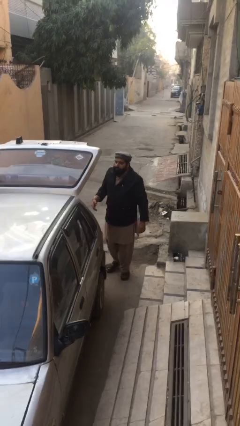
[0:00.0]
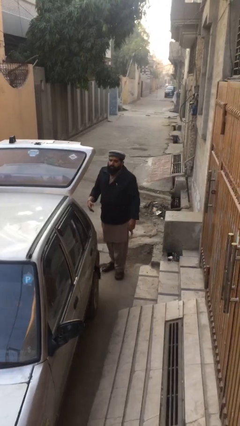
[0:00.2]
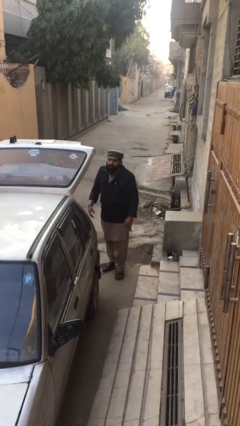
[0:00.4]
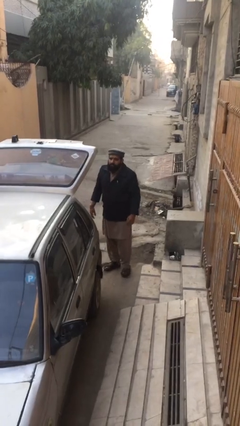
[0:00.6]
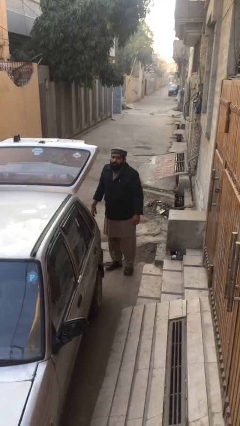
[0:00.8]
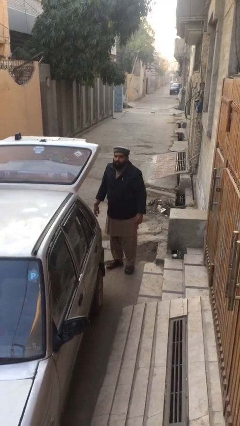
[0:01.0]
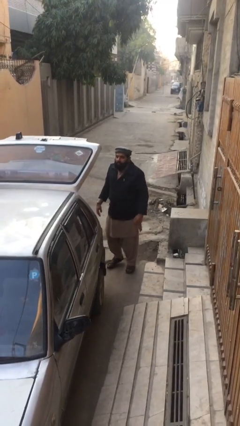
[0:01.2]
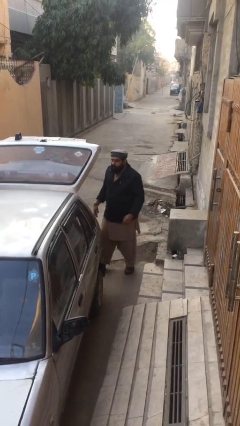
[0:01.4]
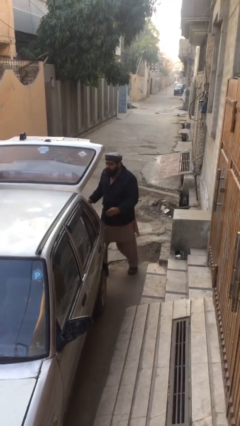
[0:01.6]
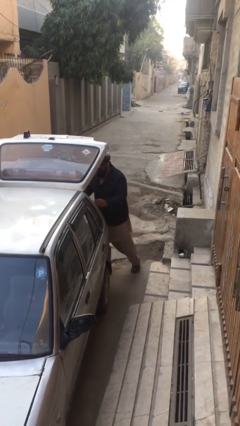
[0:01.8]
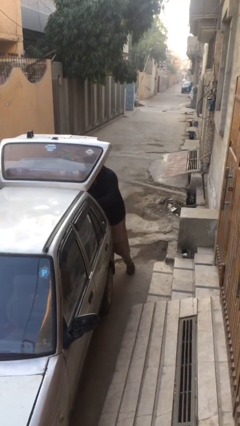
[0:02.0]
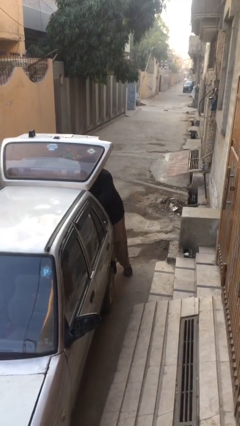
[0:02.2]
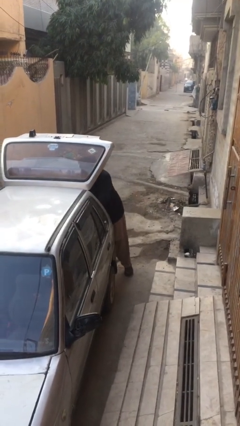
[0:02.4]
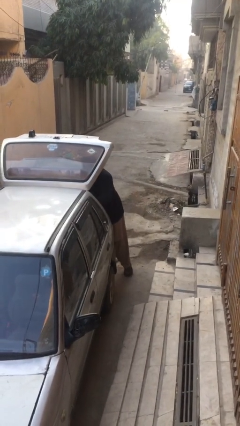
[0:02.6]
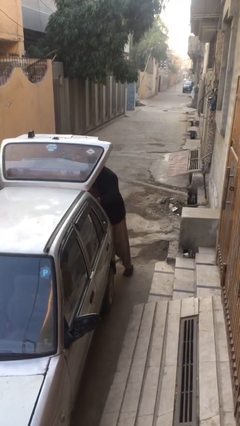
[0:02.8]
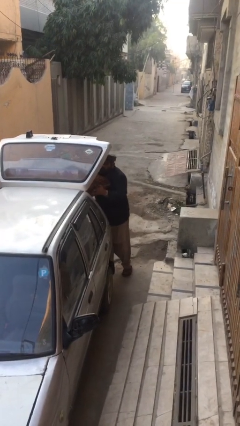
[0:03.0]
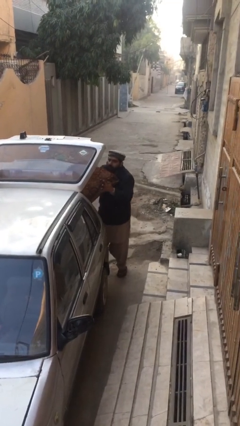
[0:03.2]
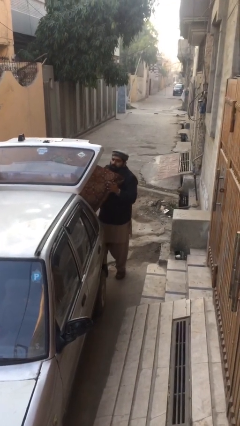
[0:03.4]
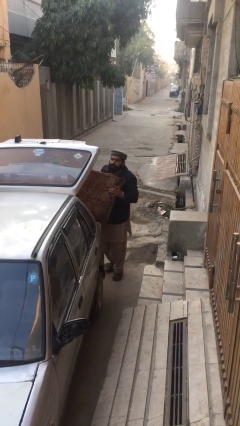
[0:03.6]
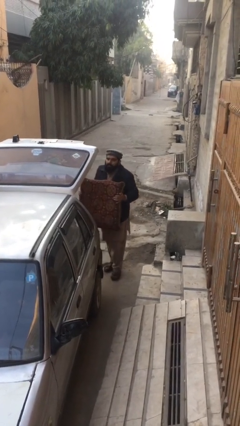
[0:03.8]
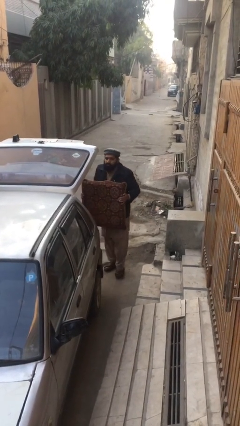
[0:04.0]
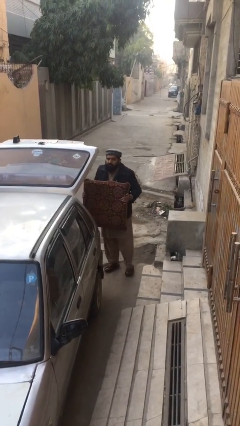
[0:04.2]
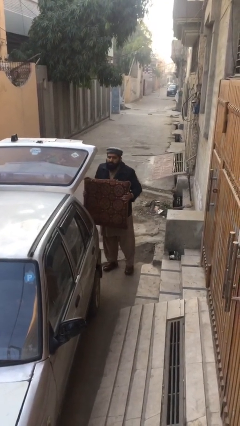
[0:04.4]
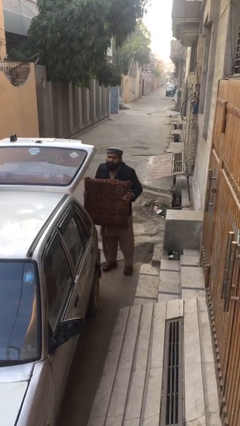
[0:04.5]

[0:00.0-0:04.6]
person unloads car

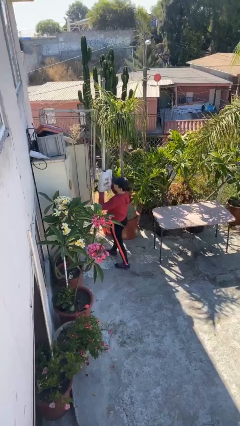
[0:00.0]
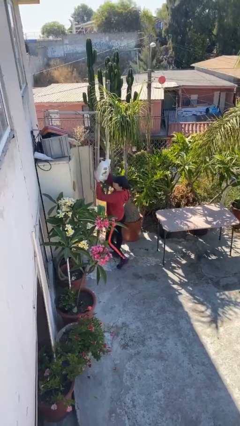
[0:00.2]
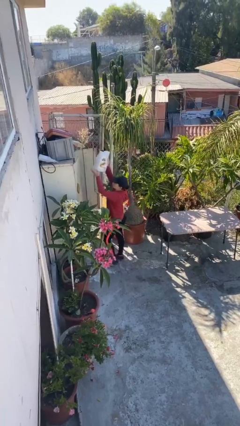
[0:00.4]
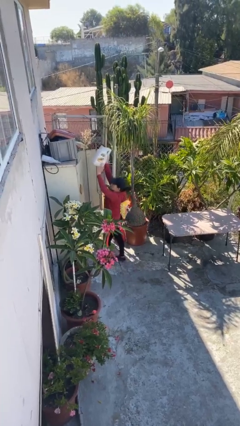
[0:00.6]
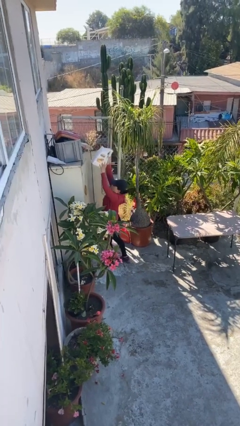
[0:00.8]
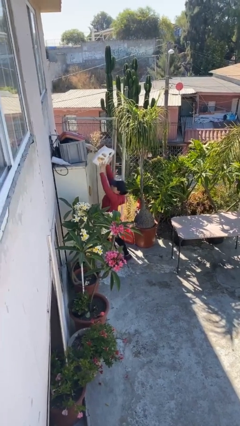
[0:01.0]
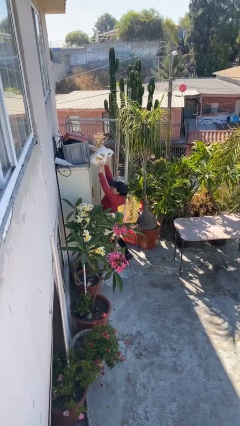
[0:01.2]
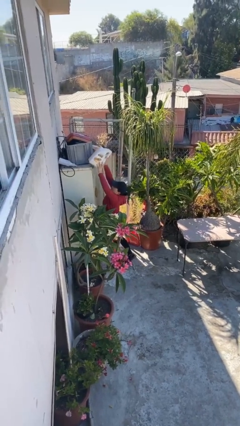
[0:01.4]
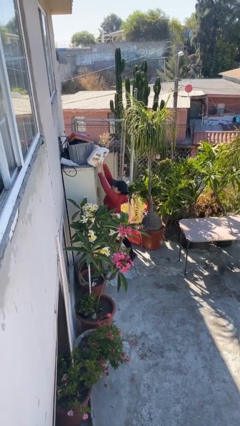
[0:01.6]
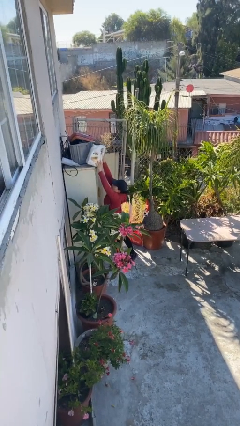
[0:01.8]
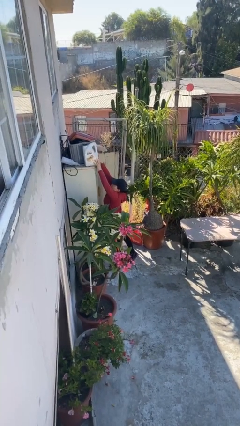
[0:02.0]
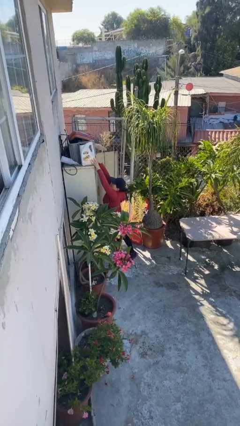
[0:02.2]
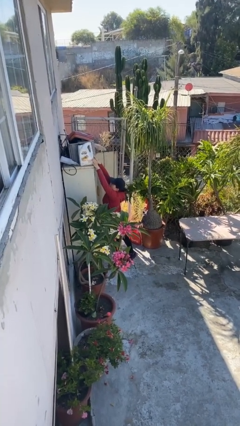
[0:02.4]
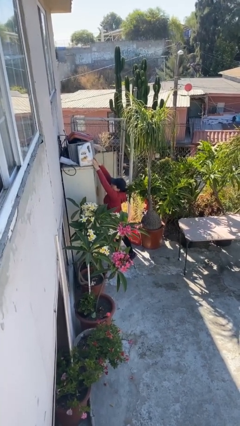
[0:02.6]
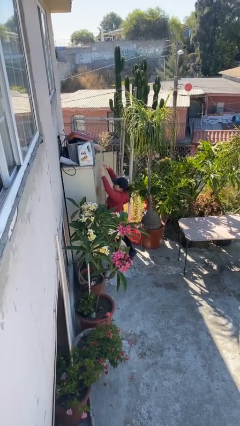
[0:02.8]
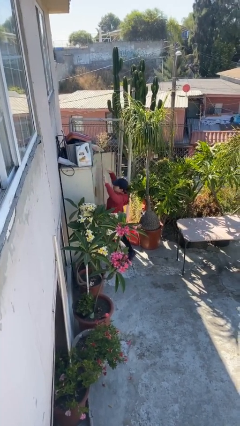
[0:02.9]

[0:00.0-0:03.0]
person puts down object on shelf

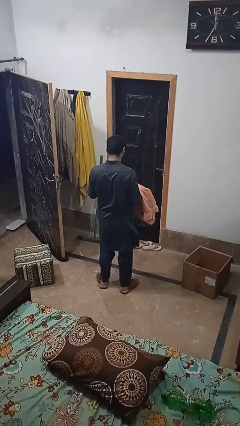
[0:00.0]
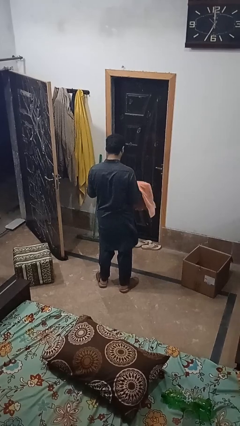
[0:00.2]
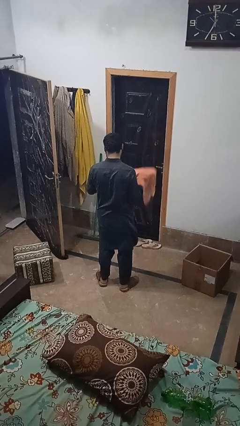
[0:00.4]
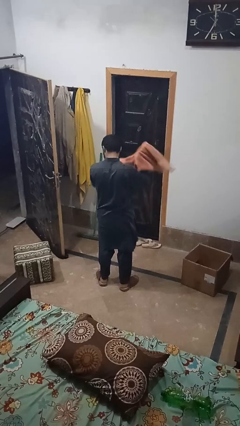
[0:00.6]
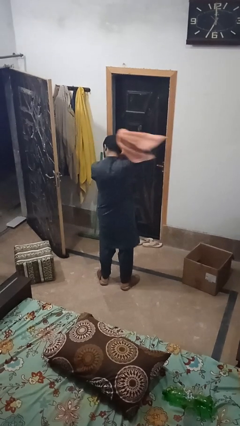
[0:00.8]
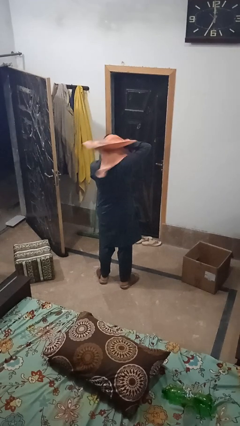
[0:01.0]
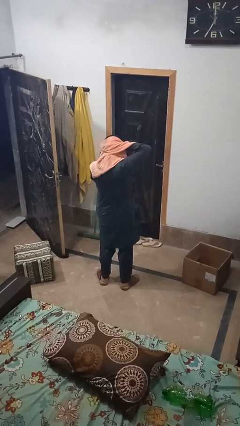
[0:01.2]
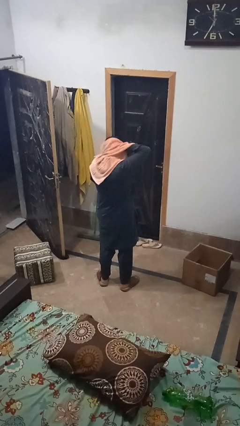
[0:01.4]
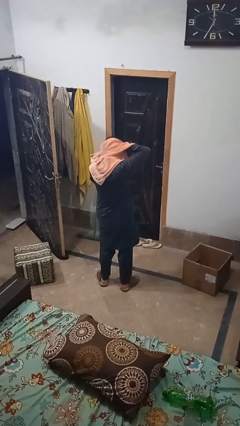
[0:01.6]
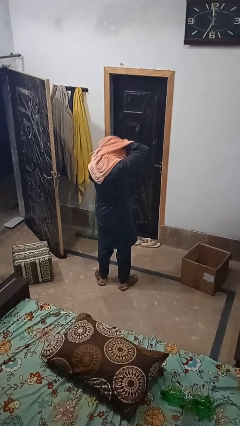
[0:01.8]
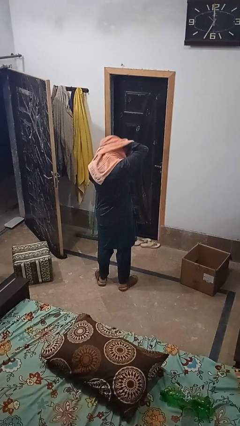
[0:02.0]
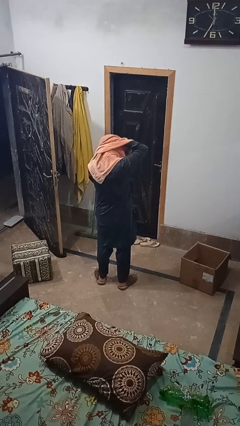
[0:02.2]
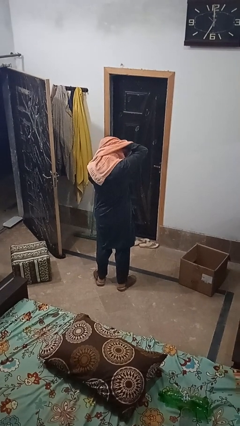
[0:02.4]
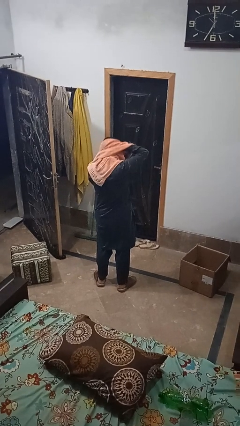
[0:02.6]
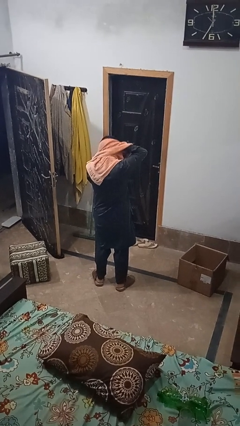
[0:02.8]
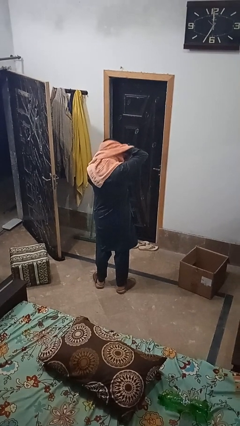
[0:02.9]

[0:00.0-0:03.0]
person dries hair with towel

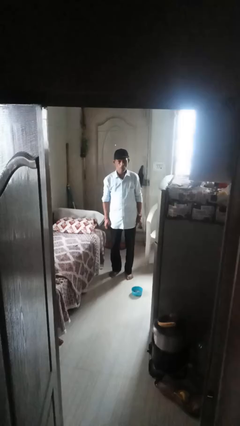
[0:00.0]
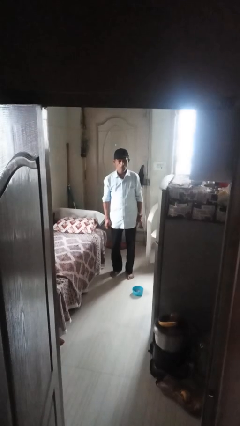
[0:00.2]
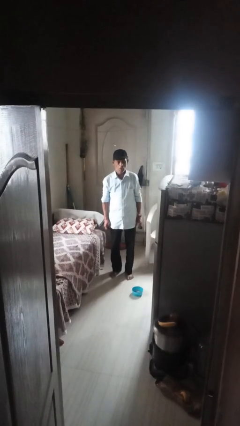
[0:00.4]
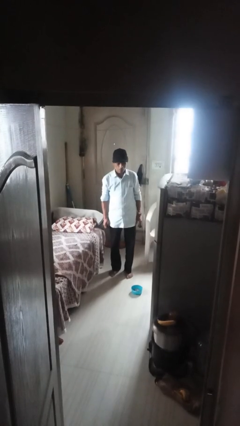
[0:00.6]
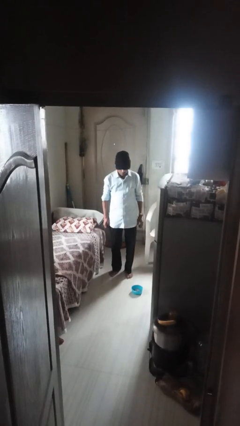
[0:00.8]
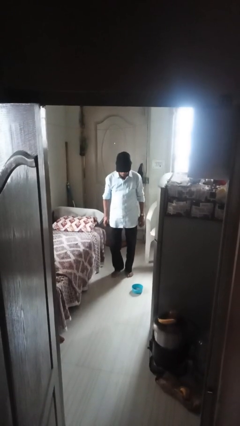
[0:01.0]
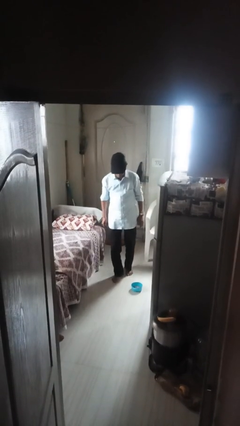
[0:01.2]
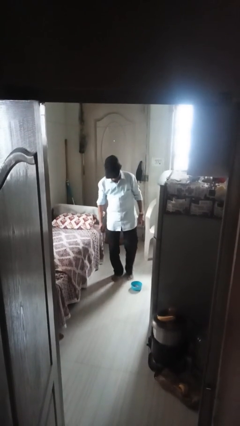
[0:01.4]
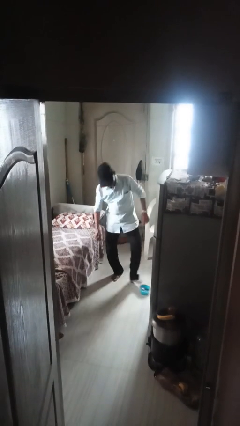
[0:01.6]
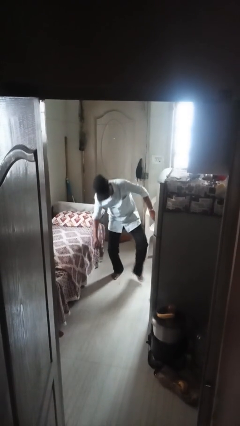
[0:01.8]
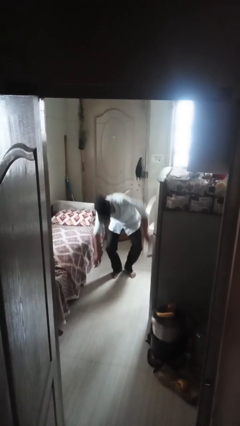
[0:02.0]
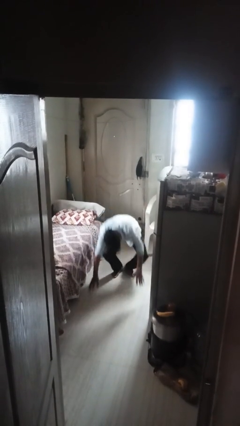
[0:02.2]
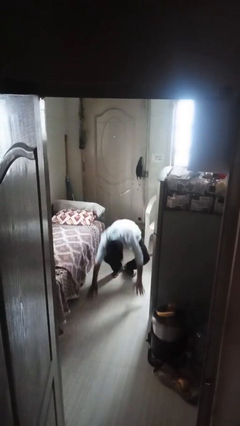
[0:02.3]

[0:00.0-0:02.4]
person trips on object on floor

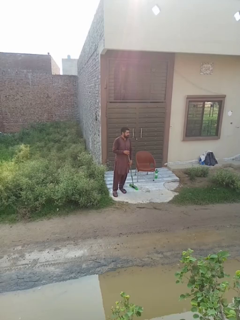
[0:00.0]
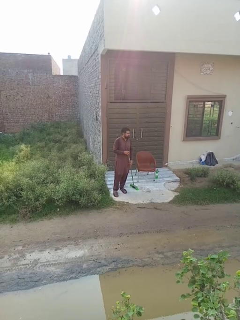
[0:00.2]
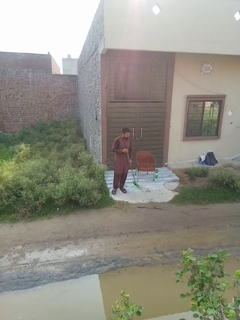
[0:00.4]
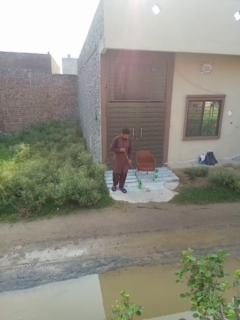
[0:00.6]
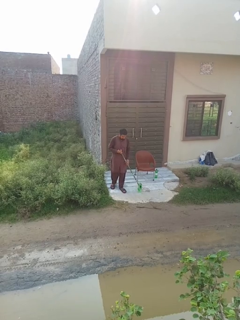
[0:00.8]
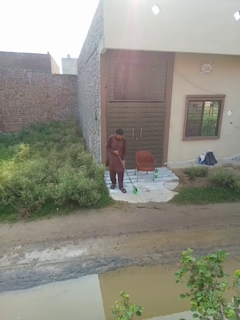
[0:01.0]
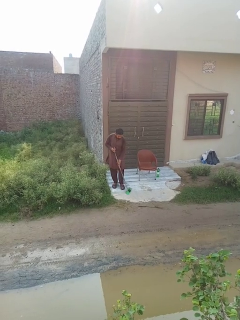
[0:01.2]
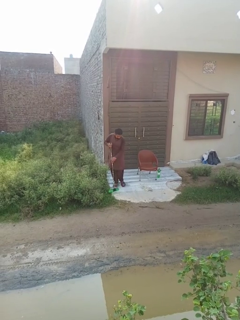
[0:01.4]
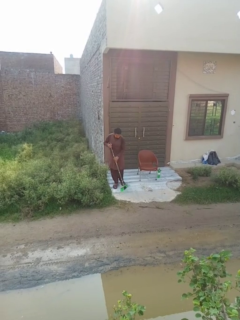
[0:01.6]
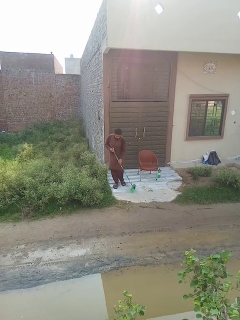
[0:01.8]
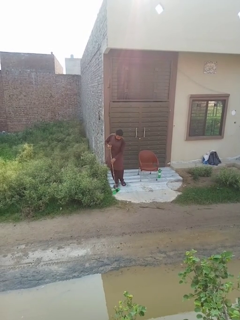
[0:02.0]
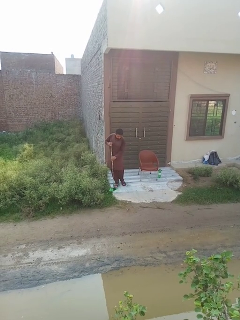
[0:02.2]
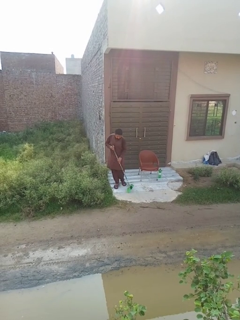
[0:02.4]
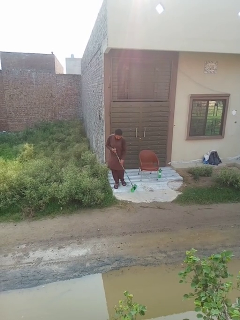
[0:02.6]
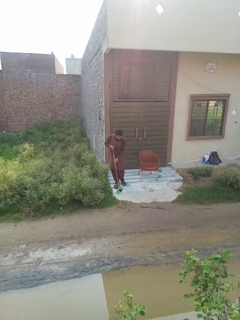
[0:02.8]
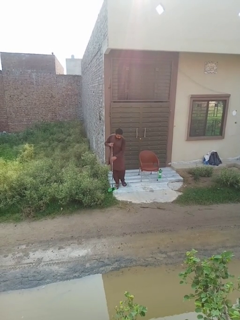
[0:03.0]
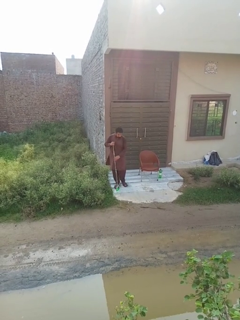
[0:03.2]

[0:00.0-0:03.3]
person sweeps floor

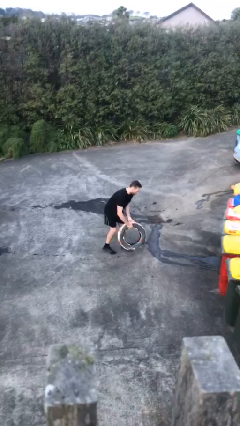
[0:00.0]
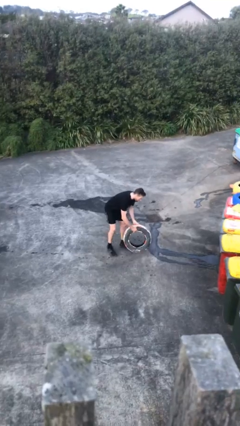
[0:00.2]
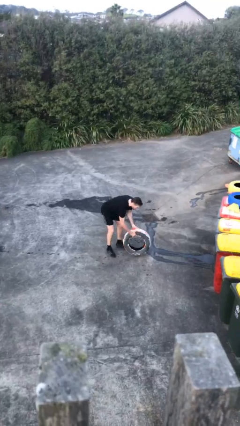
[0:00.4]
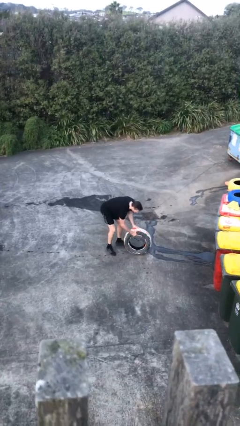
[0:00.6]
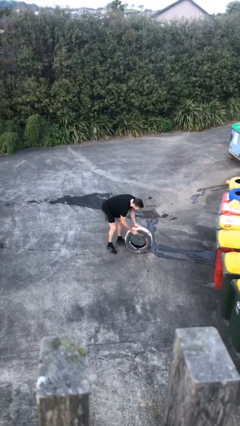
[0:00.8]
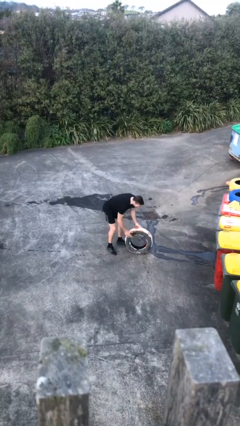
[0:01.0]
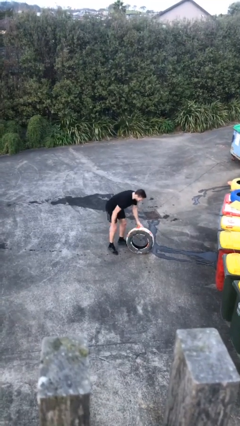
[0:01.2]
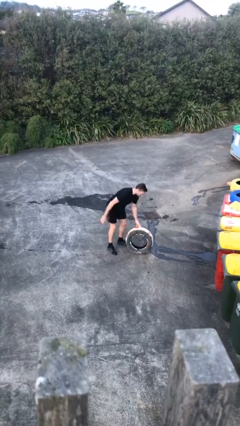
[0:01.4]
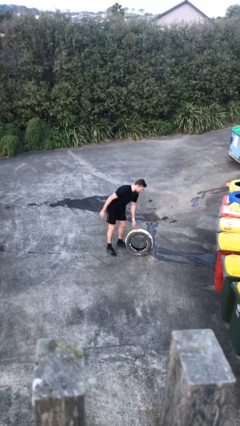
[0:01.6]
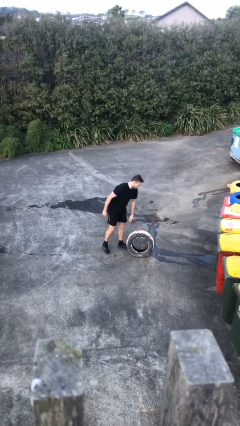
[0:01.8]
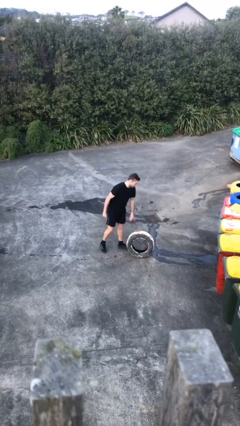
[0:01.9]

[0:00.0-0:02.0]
person puts down object on floor
